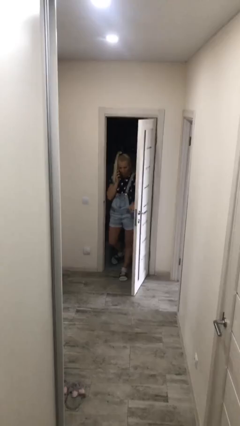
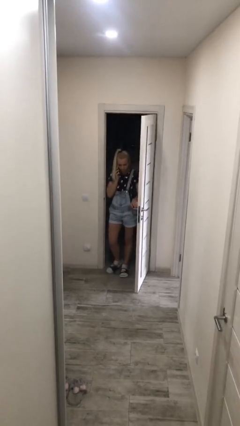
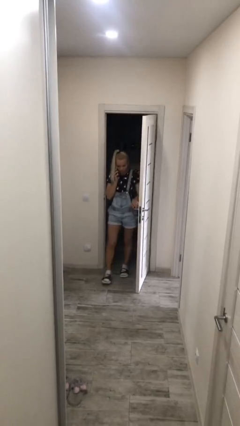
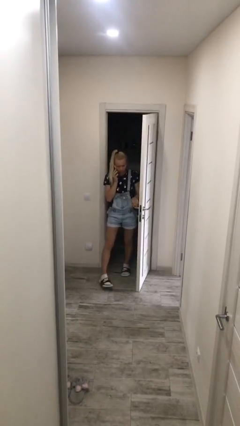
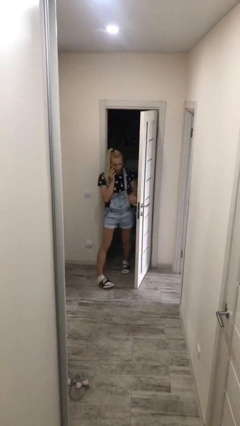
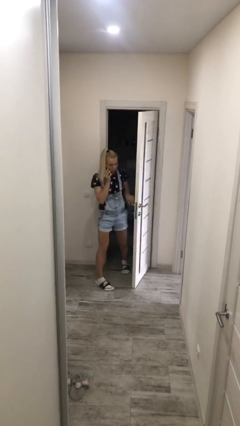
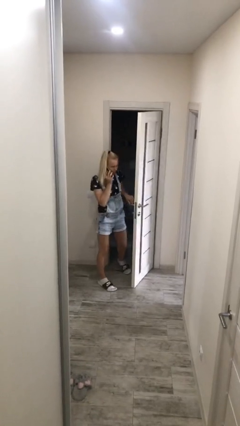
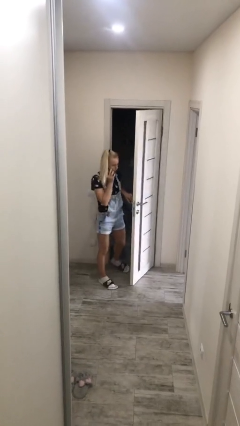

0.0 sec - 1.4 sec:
person enters scene through structure

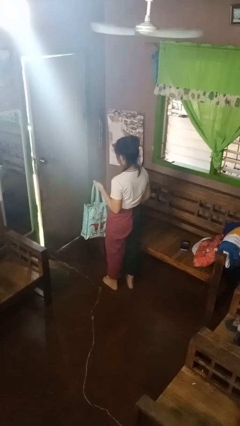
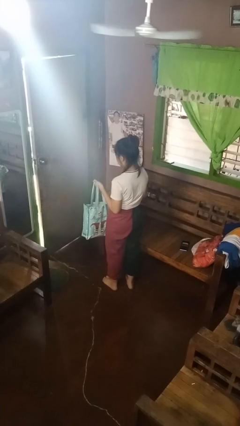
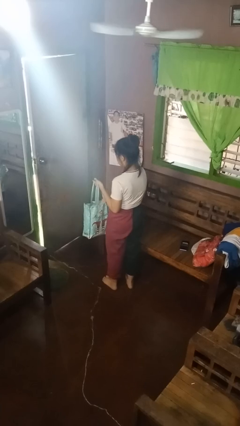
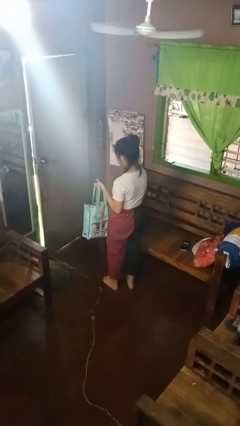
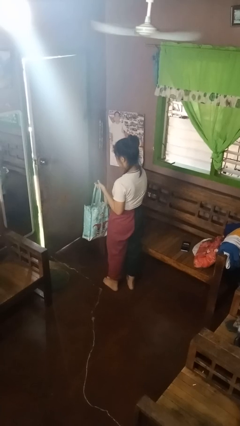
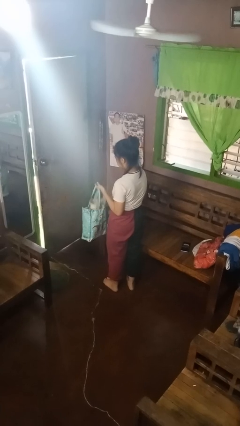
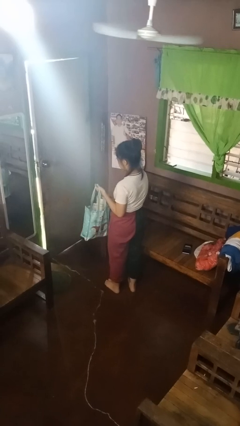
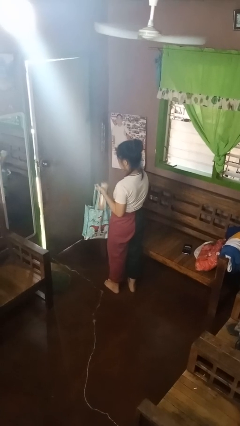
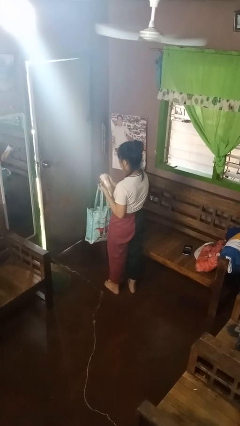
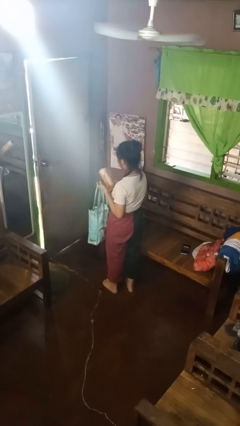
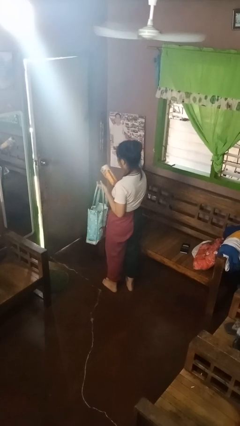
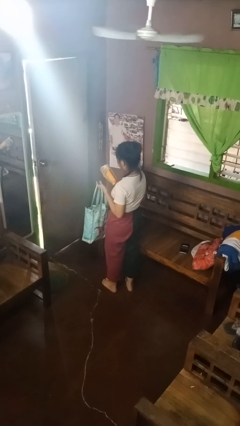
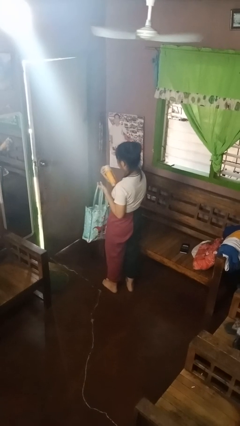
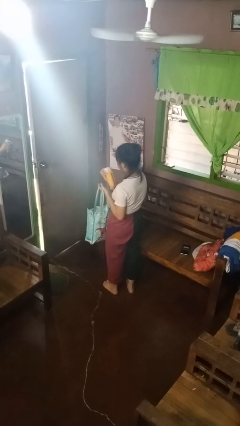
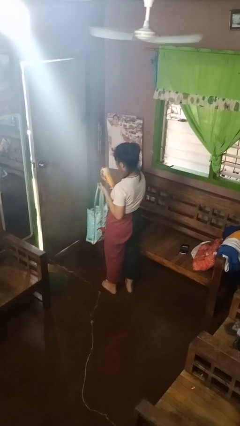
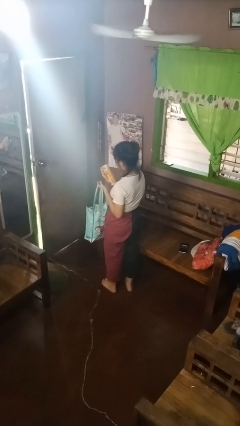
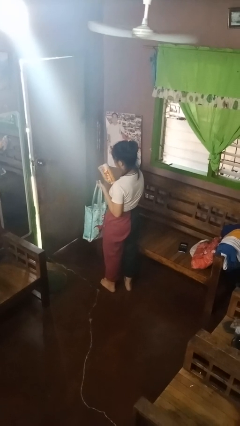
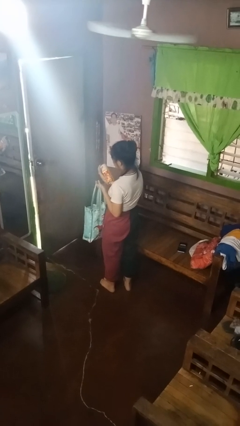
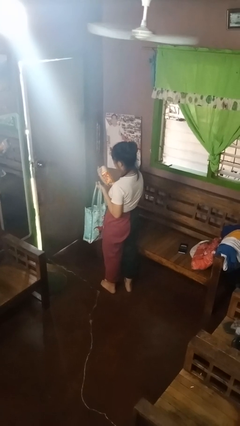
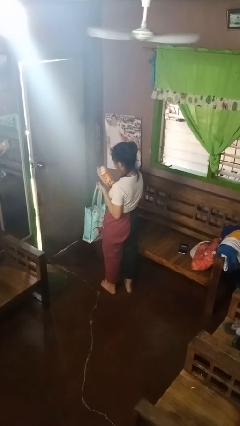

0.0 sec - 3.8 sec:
person takes object from bag

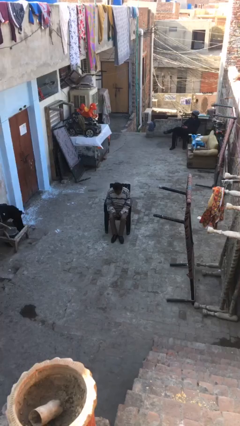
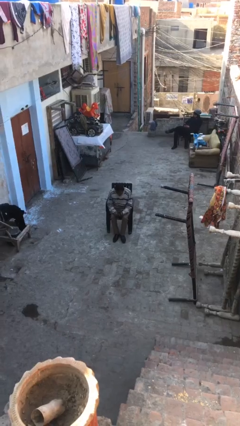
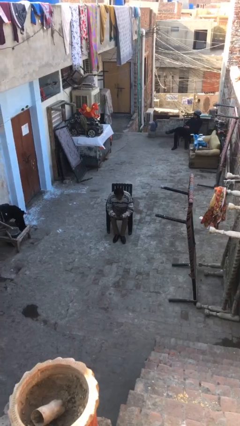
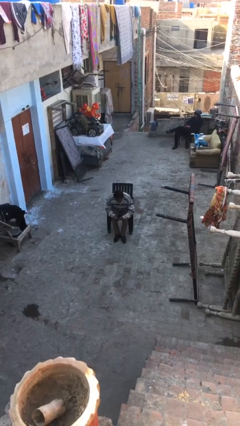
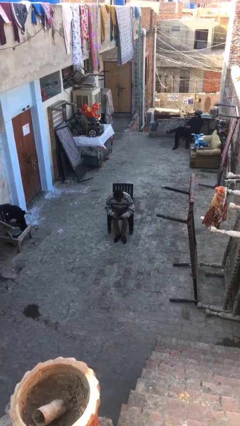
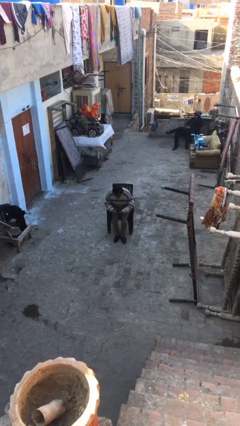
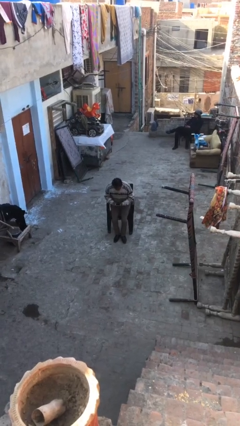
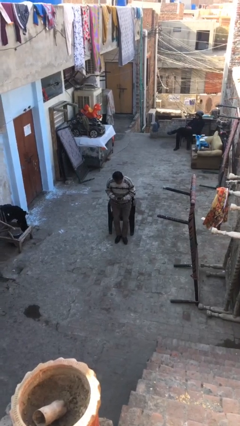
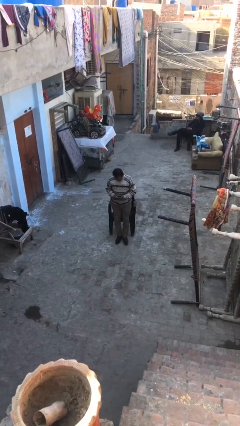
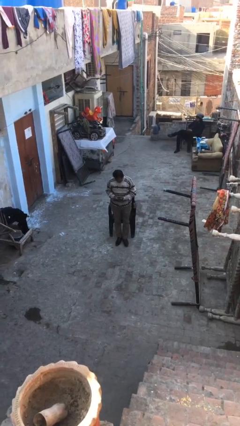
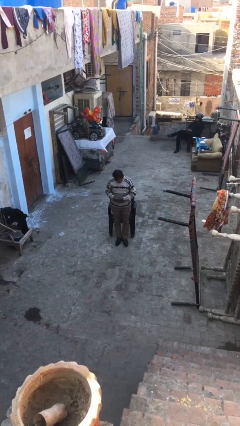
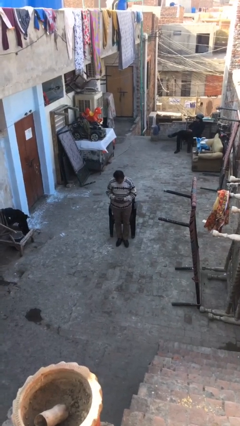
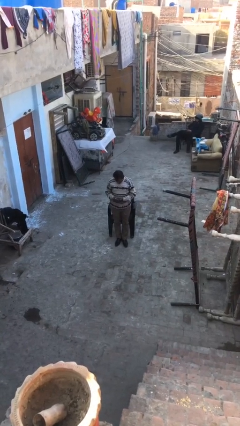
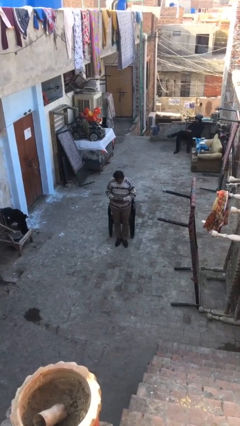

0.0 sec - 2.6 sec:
person stands up

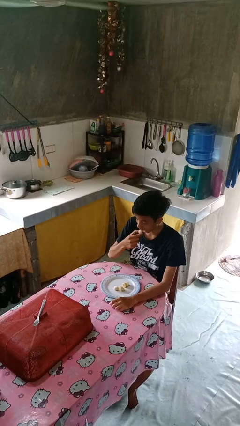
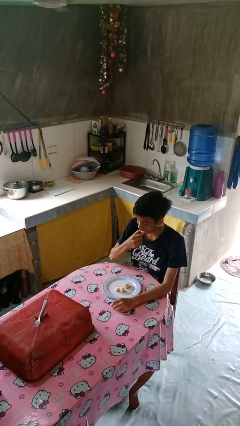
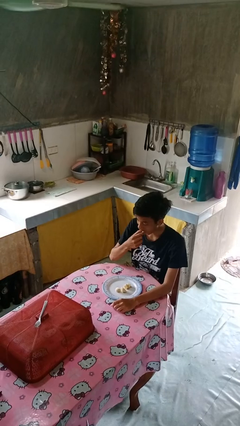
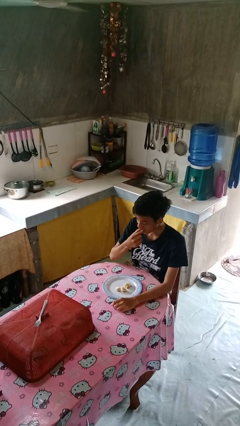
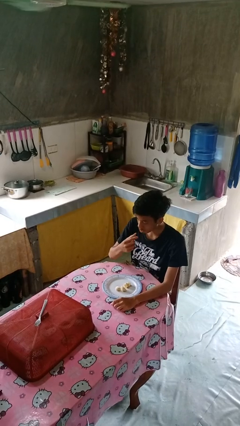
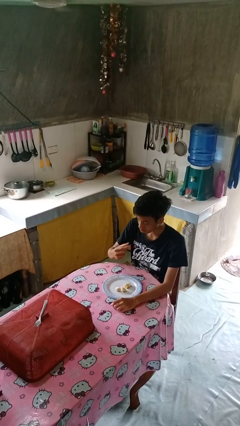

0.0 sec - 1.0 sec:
person eats with hands

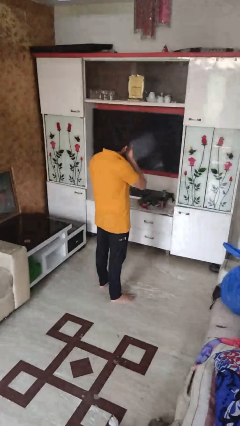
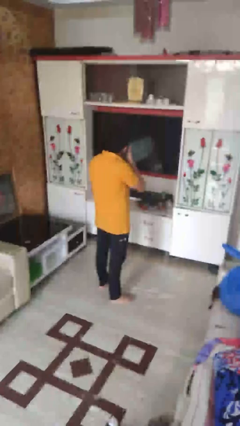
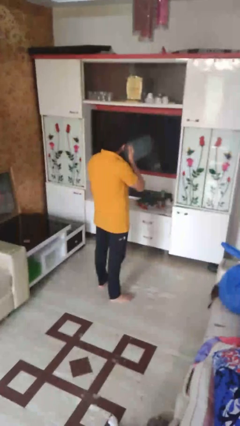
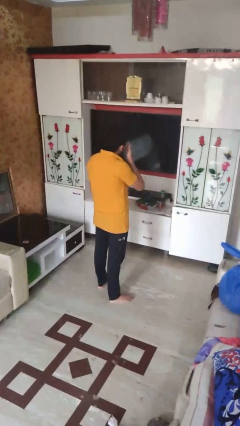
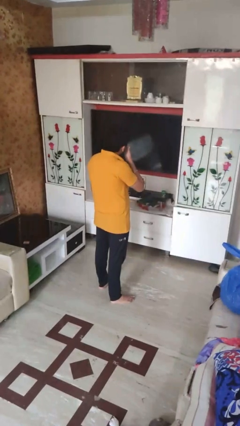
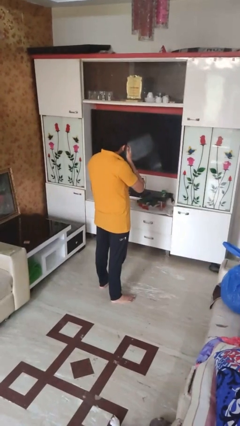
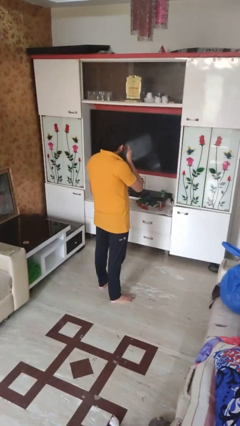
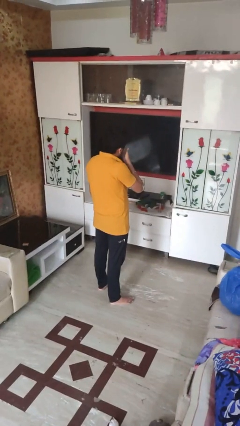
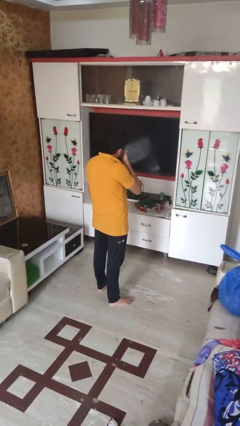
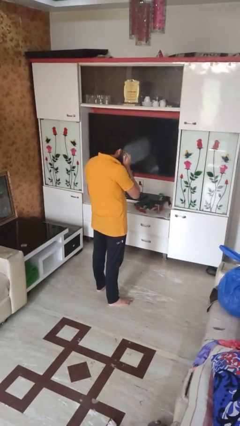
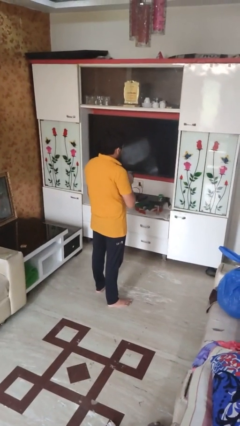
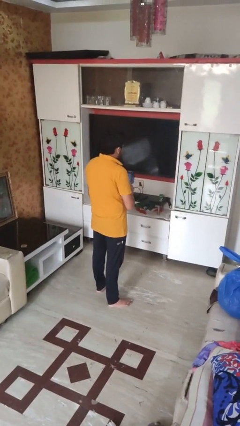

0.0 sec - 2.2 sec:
person licks fingers

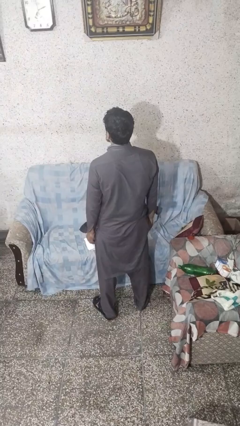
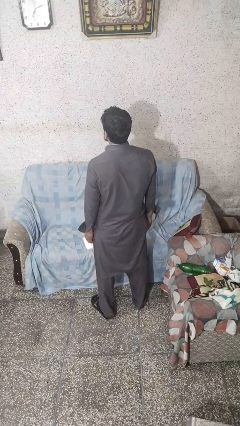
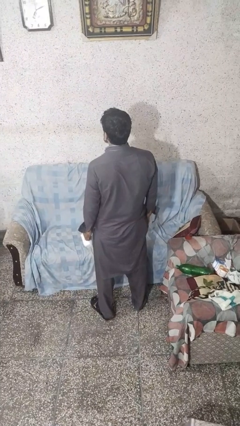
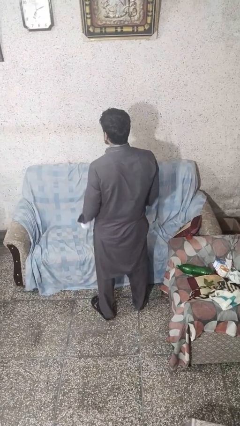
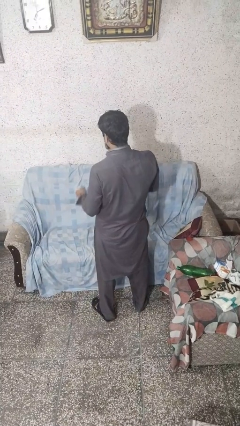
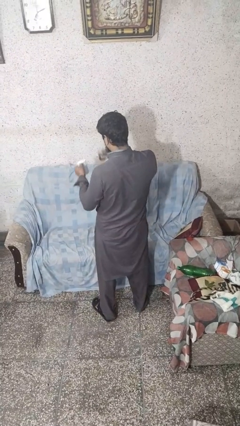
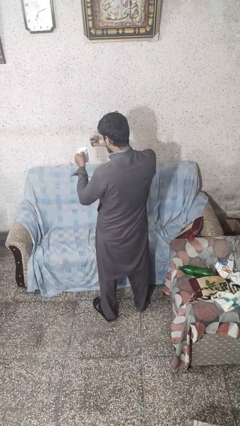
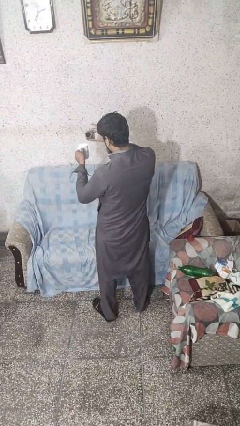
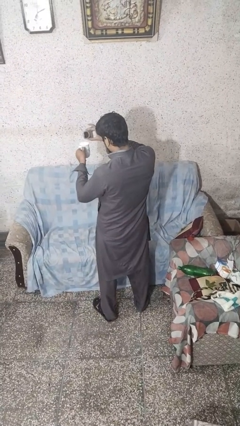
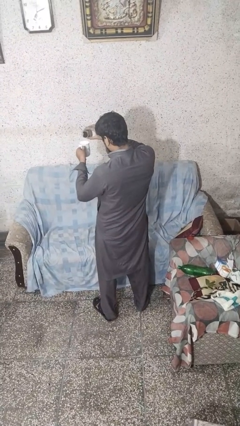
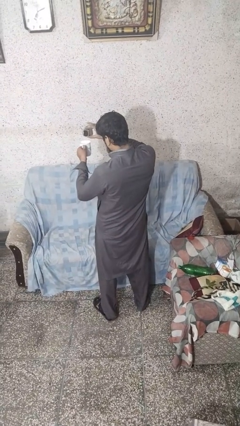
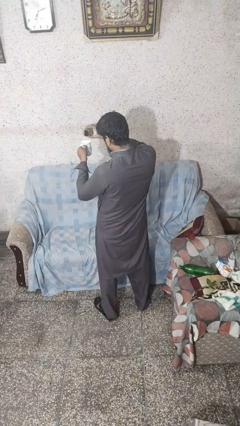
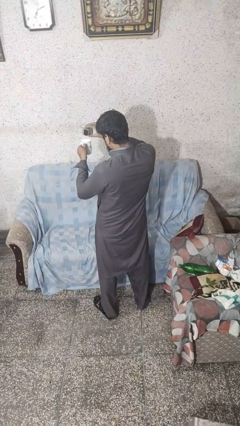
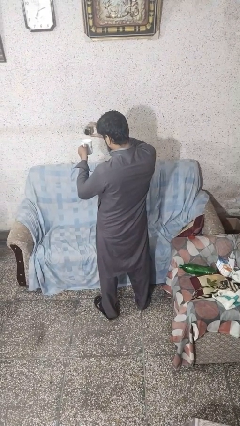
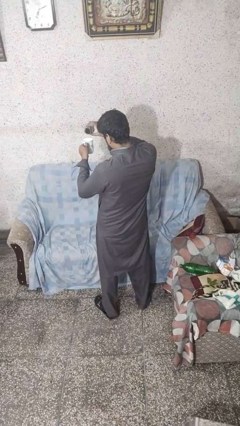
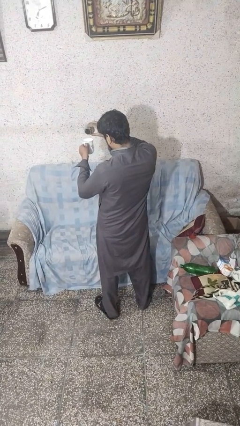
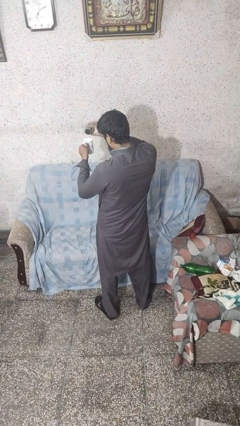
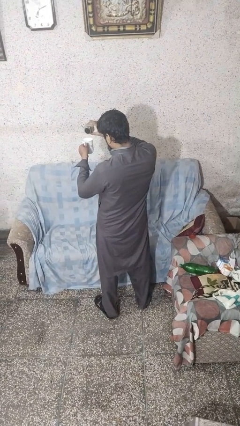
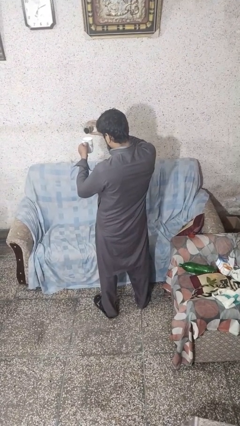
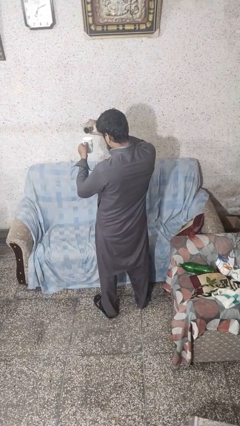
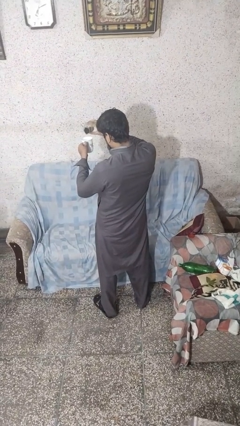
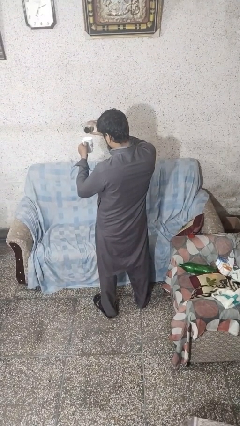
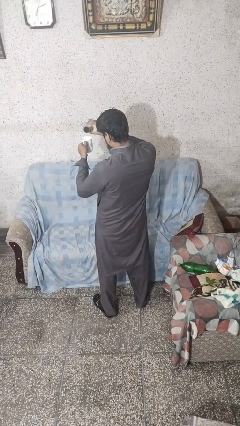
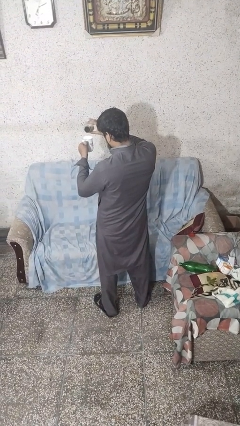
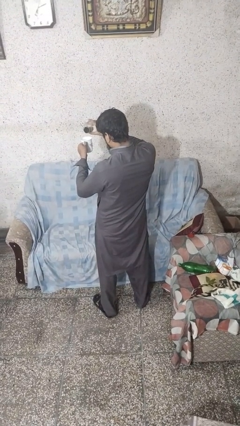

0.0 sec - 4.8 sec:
person pours coffee into mug

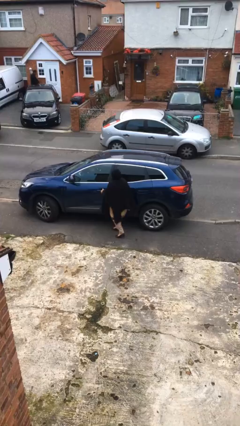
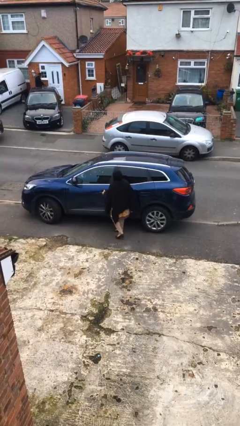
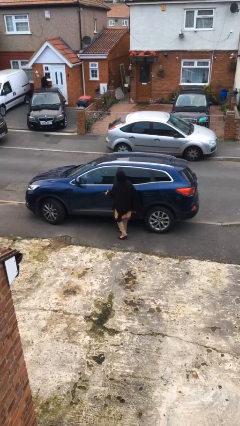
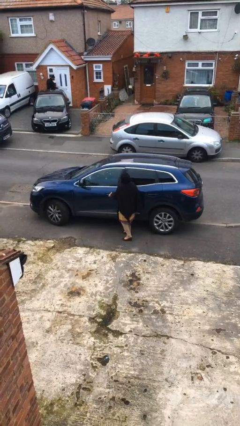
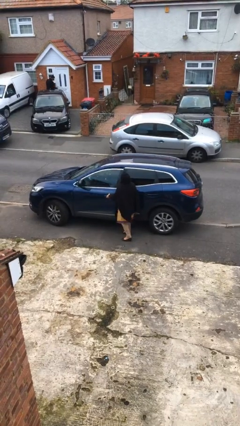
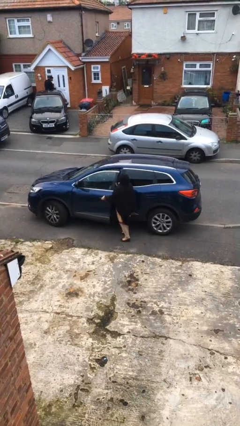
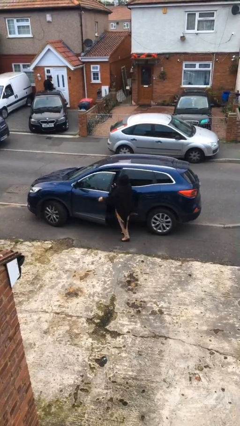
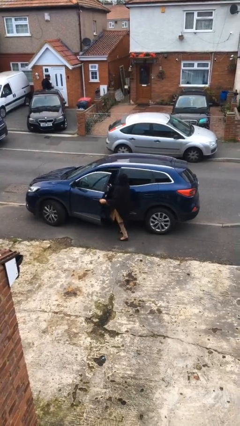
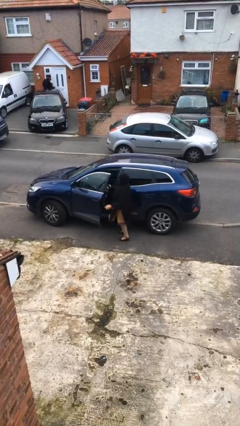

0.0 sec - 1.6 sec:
person opens car door
